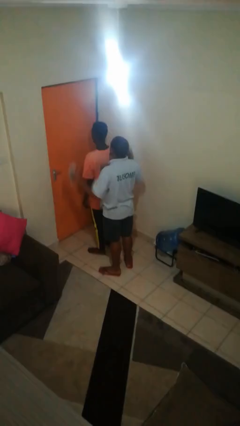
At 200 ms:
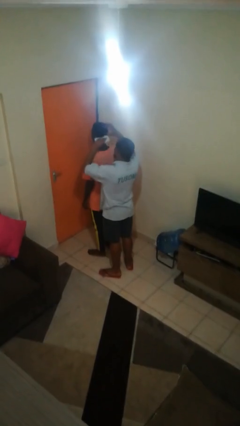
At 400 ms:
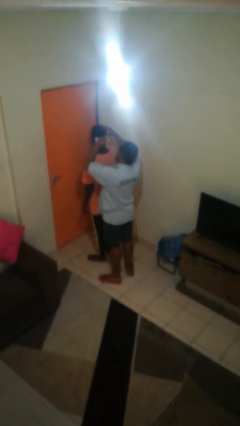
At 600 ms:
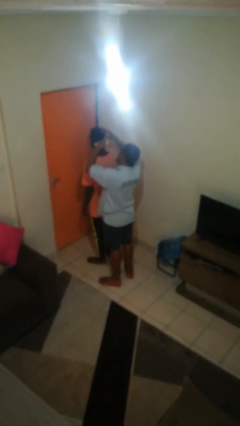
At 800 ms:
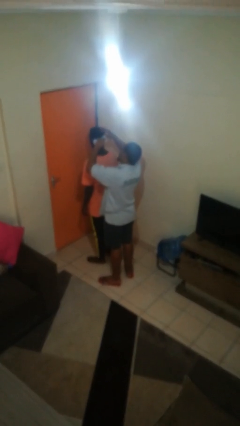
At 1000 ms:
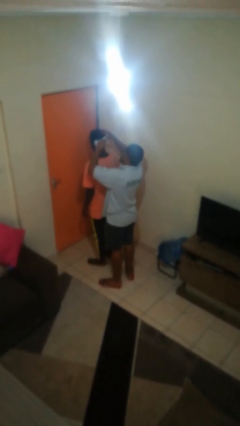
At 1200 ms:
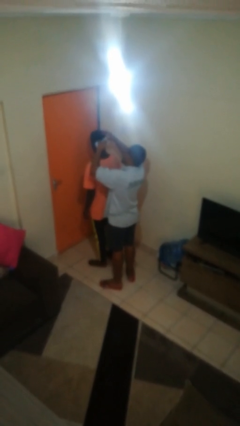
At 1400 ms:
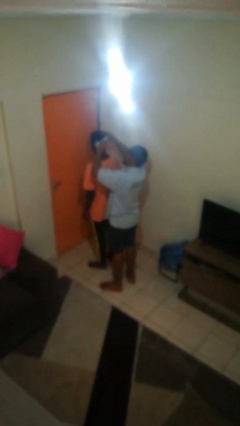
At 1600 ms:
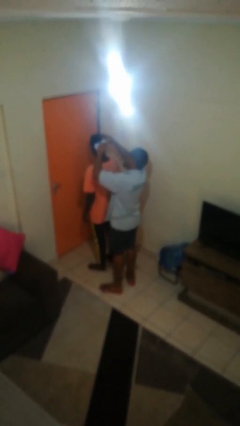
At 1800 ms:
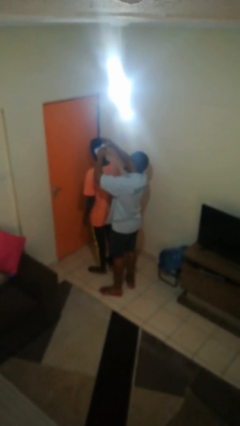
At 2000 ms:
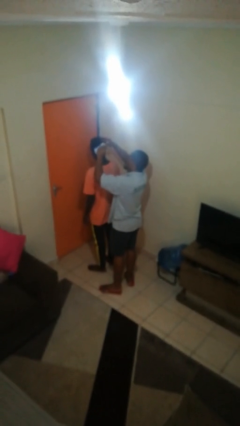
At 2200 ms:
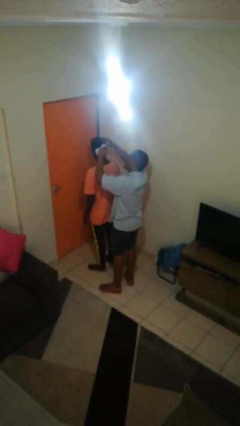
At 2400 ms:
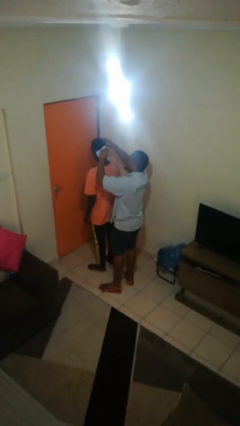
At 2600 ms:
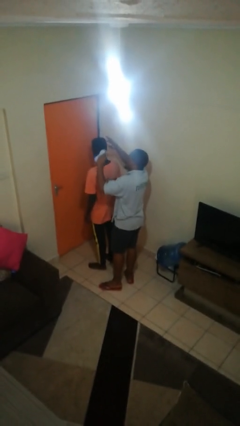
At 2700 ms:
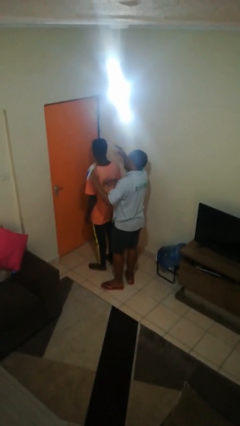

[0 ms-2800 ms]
person brushes hair of person

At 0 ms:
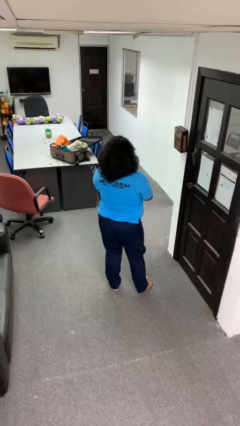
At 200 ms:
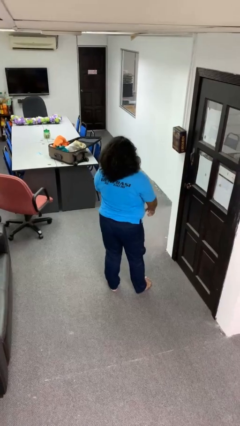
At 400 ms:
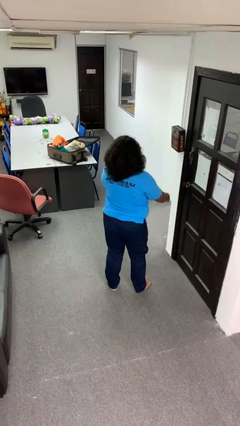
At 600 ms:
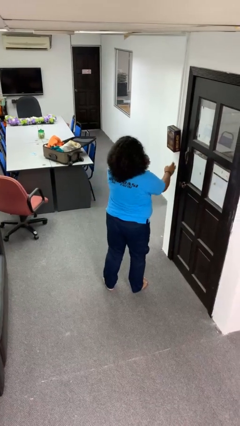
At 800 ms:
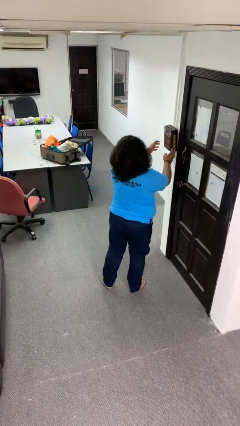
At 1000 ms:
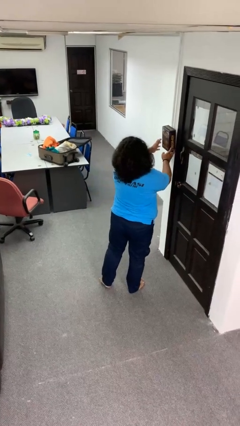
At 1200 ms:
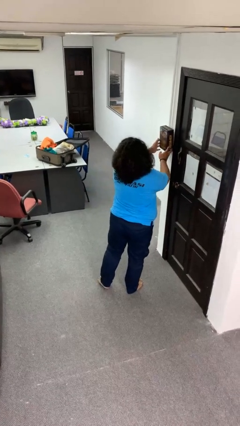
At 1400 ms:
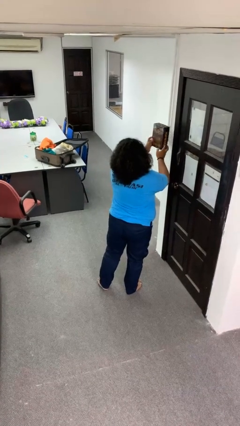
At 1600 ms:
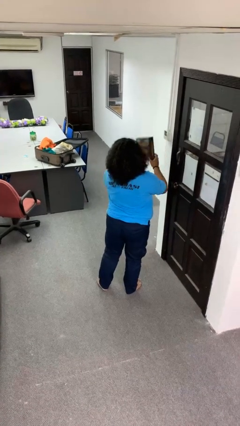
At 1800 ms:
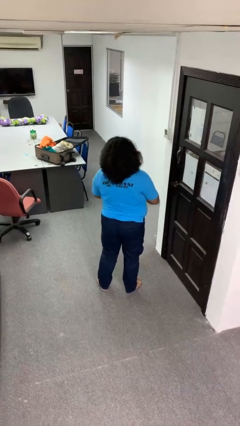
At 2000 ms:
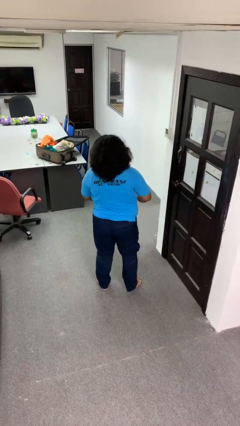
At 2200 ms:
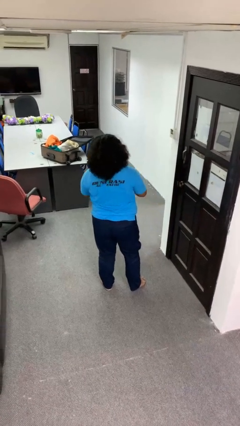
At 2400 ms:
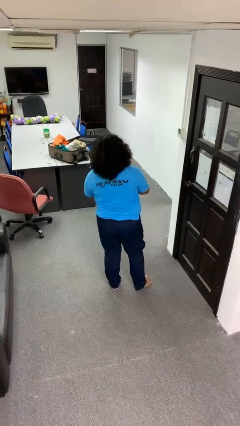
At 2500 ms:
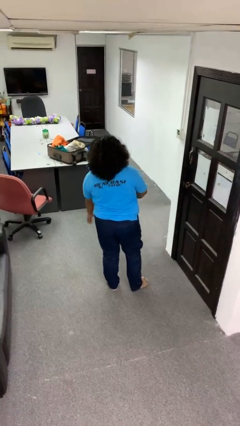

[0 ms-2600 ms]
person takes down picture frame

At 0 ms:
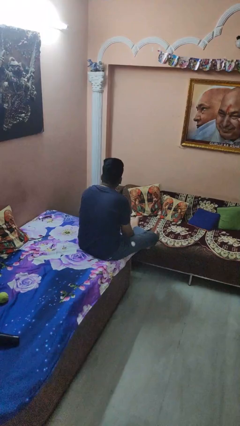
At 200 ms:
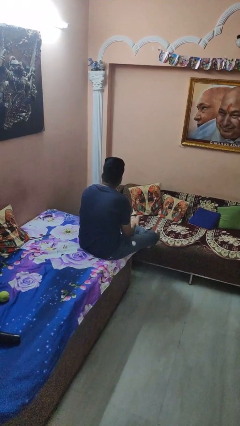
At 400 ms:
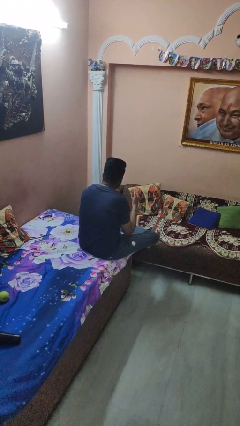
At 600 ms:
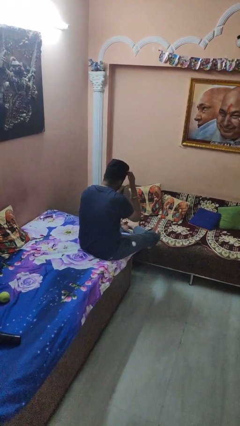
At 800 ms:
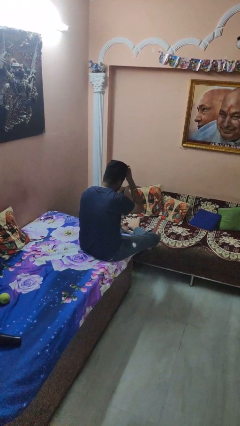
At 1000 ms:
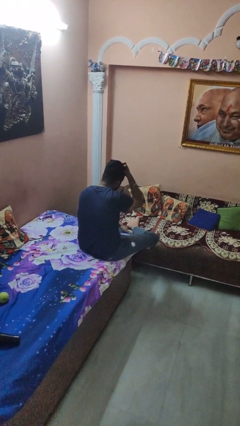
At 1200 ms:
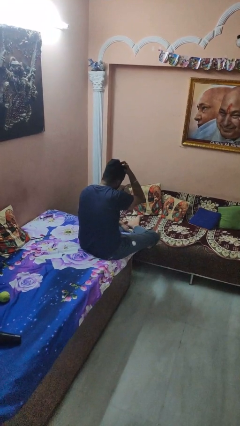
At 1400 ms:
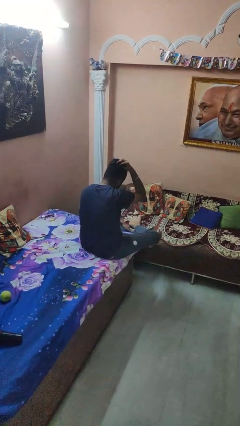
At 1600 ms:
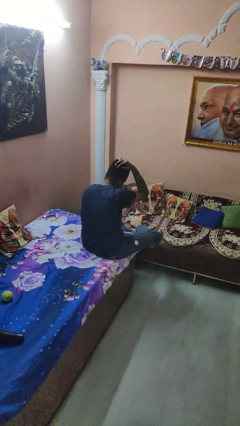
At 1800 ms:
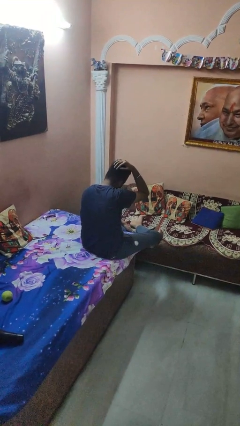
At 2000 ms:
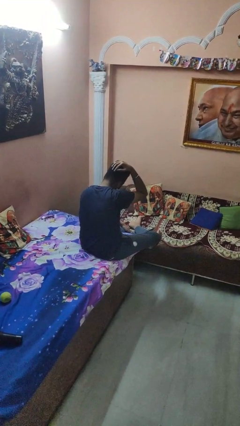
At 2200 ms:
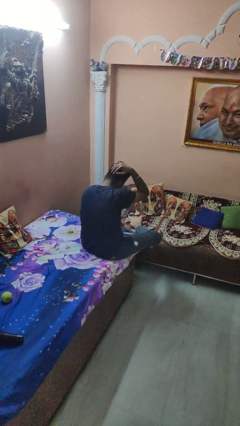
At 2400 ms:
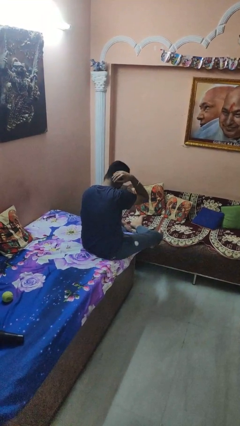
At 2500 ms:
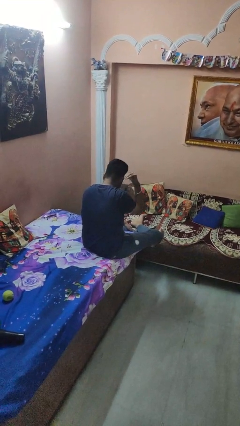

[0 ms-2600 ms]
person strokes hair

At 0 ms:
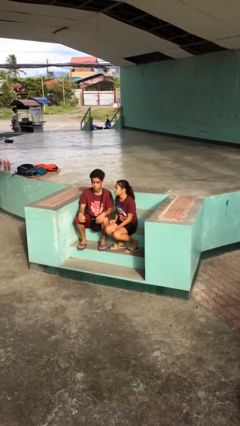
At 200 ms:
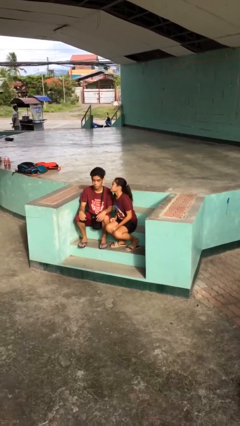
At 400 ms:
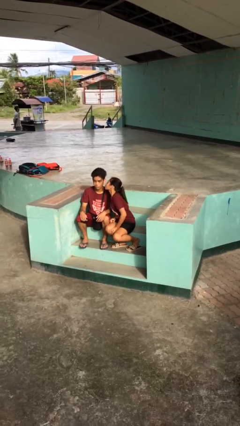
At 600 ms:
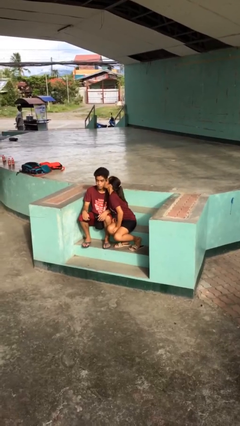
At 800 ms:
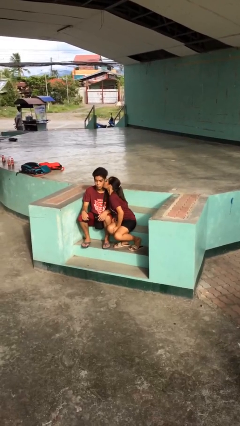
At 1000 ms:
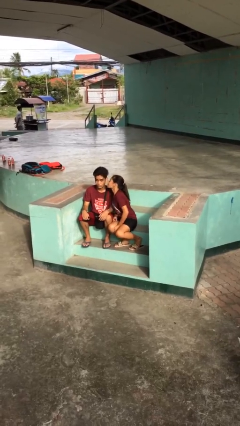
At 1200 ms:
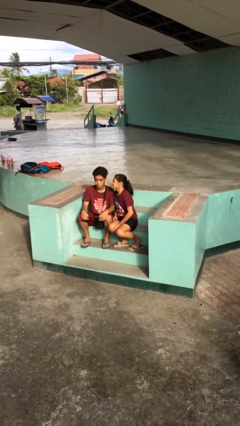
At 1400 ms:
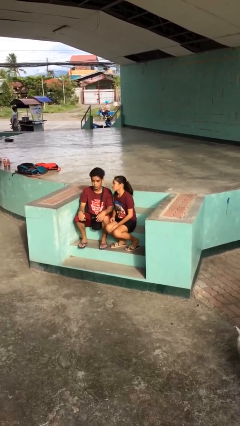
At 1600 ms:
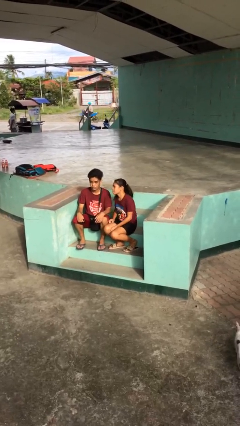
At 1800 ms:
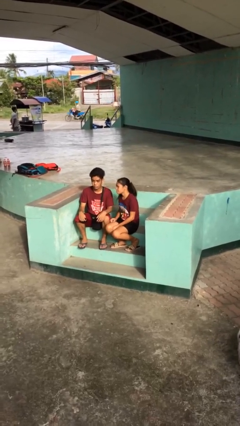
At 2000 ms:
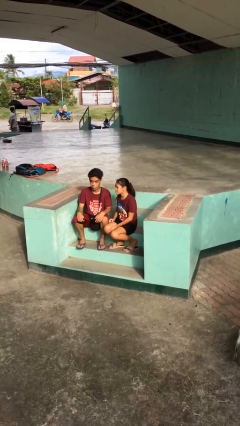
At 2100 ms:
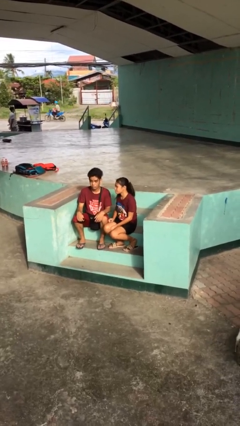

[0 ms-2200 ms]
person kisses cheek of person

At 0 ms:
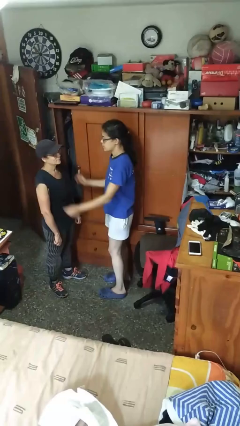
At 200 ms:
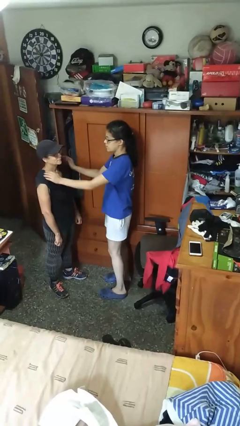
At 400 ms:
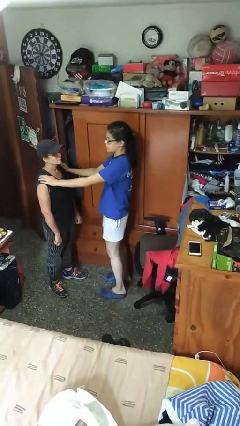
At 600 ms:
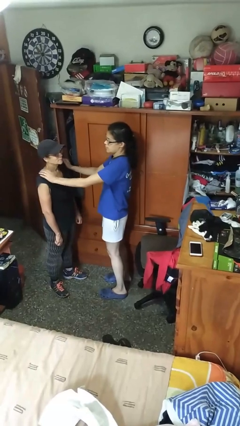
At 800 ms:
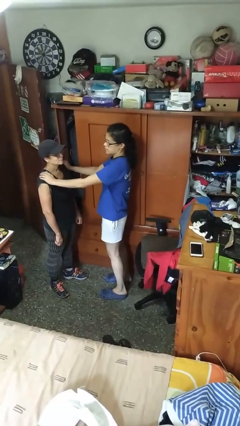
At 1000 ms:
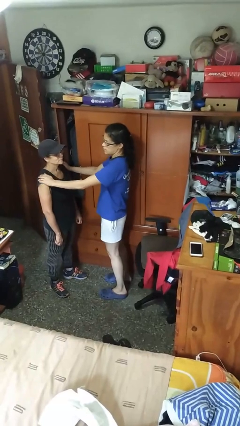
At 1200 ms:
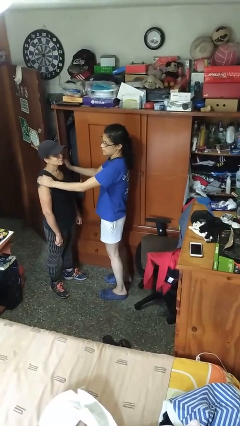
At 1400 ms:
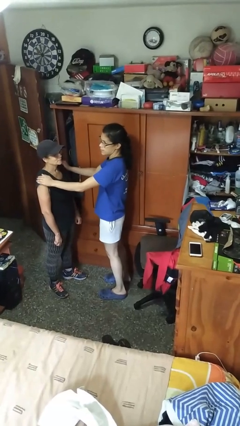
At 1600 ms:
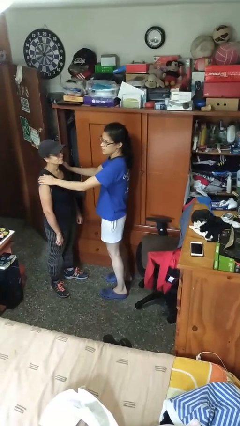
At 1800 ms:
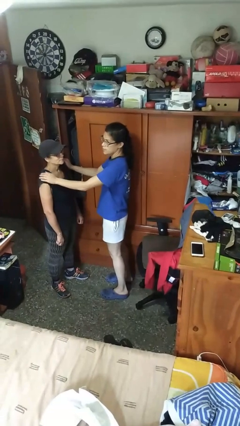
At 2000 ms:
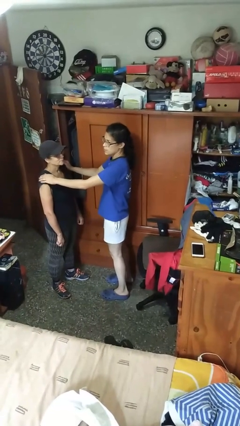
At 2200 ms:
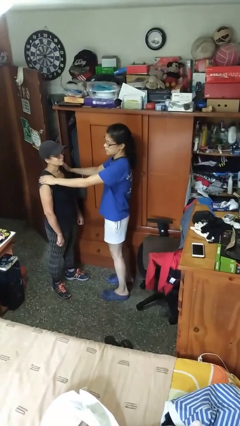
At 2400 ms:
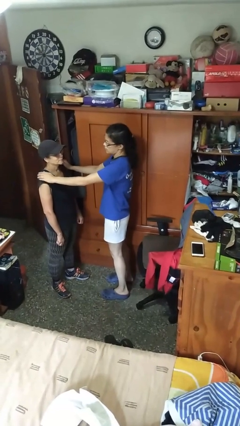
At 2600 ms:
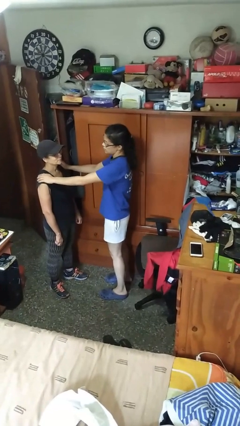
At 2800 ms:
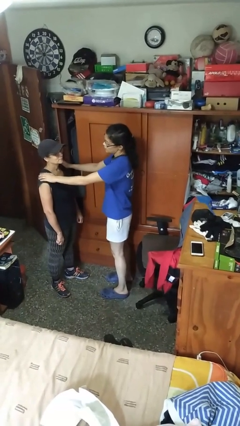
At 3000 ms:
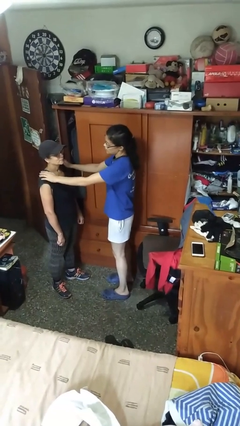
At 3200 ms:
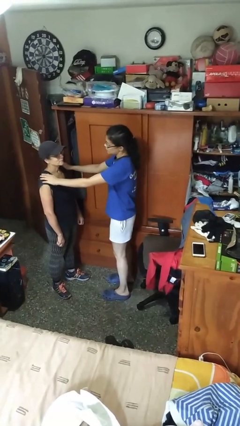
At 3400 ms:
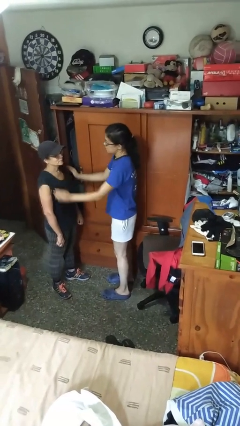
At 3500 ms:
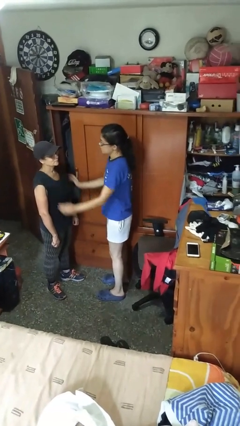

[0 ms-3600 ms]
person pounds shoulders of person

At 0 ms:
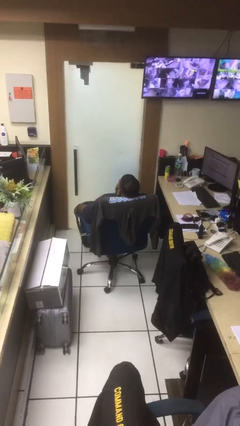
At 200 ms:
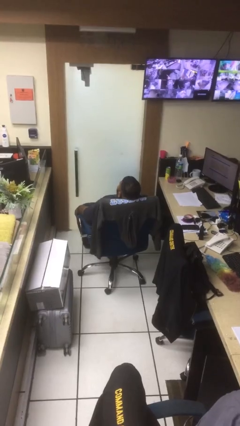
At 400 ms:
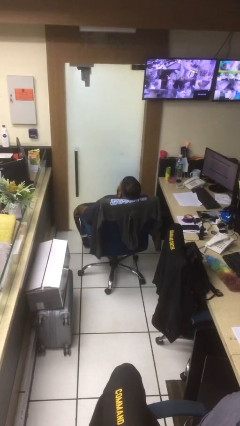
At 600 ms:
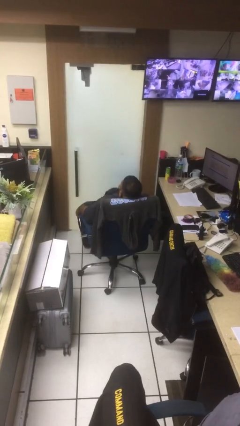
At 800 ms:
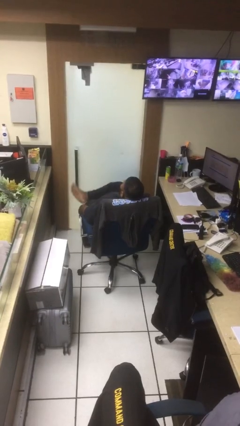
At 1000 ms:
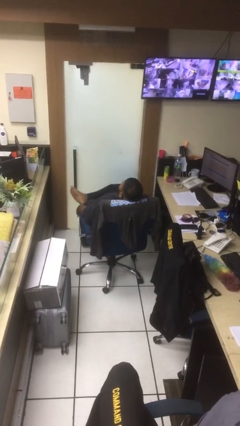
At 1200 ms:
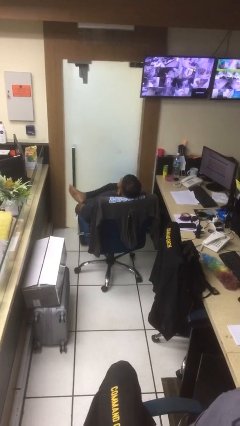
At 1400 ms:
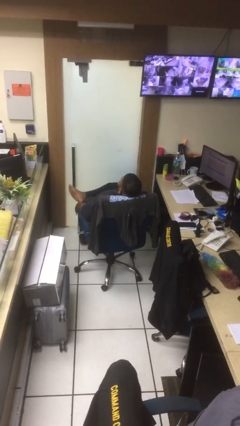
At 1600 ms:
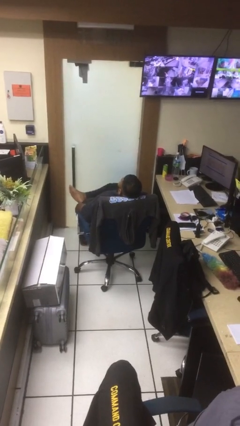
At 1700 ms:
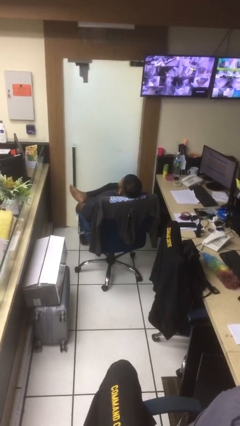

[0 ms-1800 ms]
person crosses legs

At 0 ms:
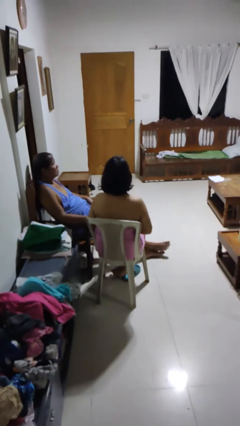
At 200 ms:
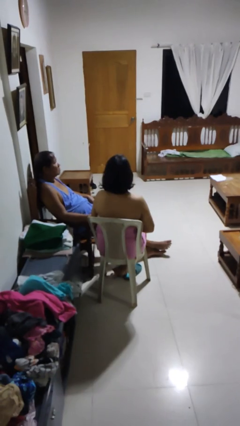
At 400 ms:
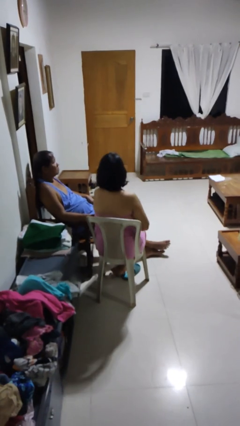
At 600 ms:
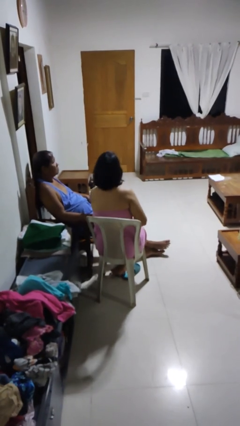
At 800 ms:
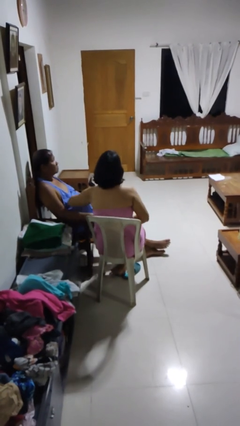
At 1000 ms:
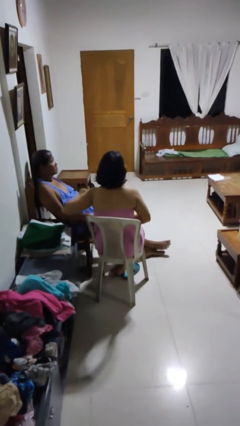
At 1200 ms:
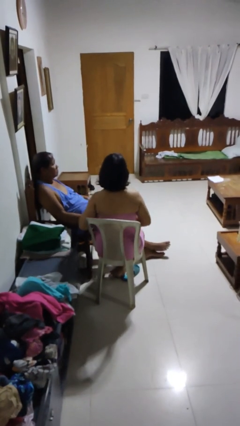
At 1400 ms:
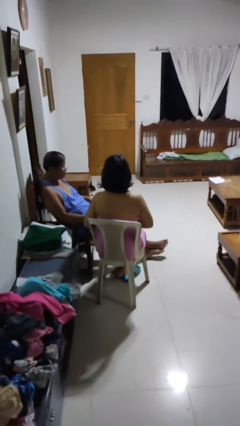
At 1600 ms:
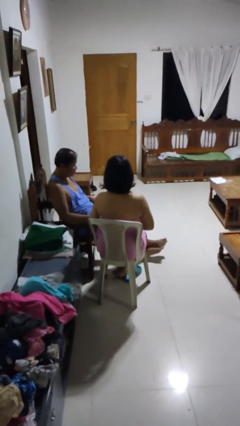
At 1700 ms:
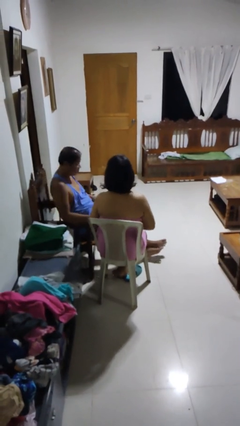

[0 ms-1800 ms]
person nudges person with elbow
